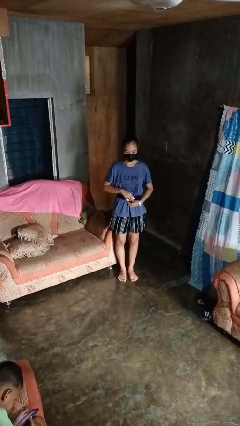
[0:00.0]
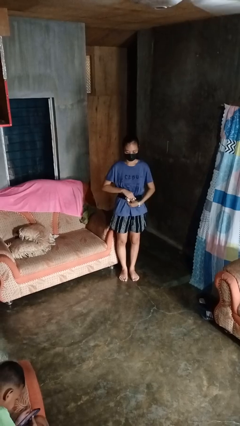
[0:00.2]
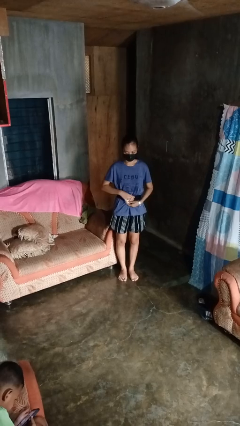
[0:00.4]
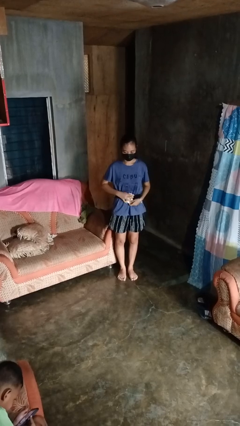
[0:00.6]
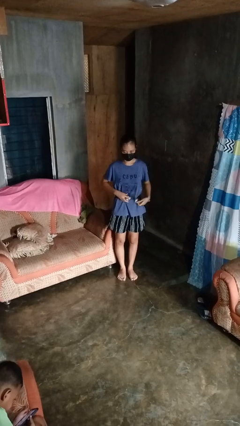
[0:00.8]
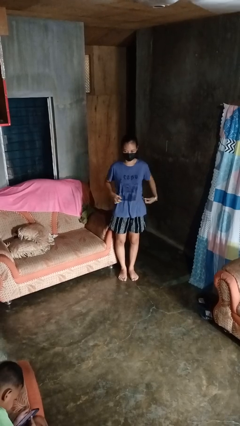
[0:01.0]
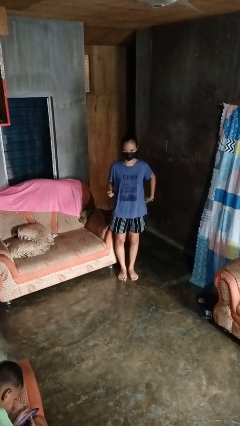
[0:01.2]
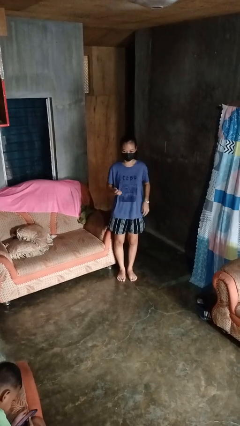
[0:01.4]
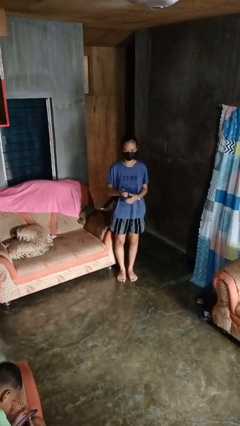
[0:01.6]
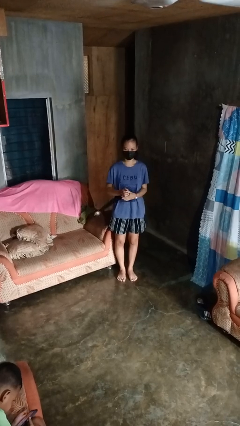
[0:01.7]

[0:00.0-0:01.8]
person takes off belt

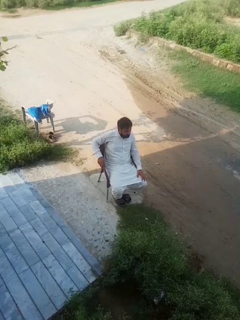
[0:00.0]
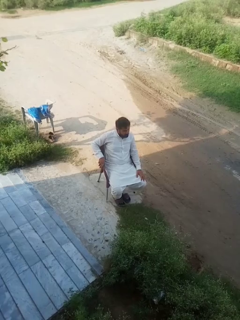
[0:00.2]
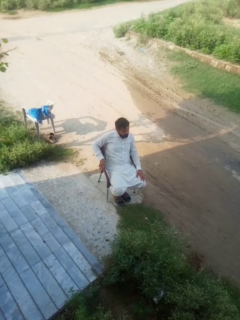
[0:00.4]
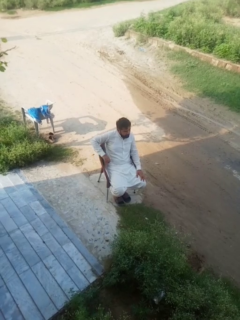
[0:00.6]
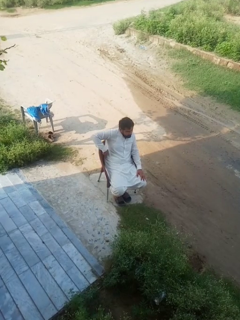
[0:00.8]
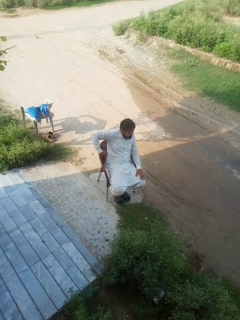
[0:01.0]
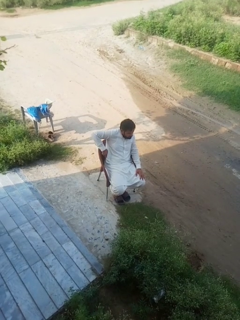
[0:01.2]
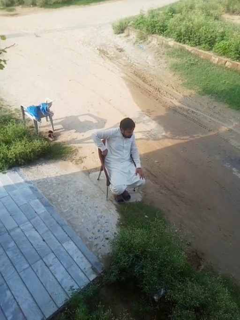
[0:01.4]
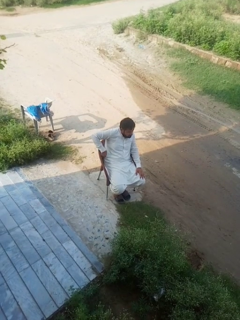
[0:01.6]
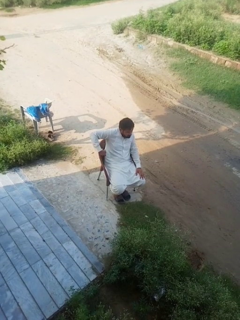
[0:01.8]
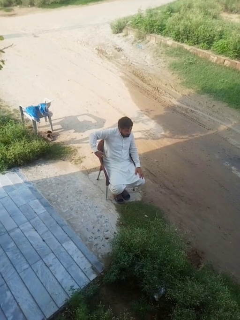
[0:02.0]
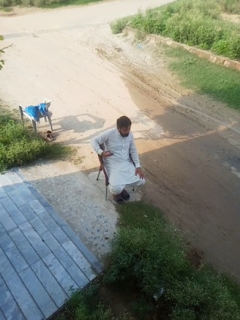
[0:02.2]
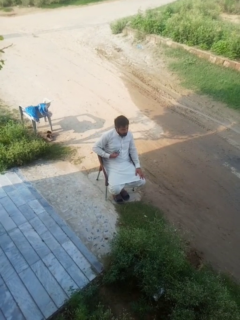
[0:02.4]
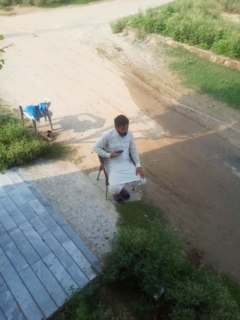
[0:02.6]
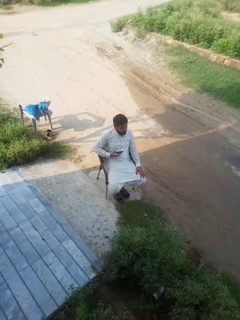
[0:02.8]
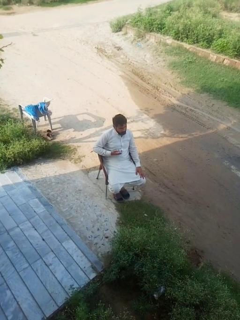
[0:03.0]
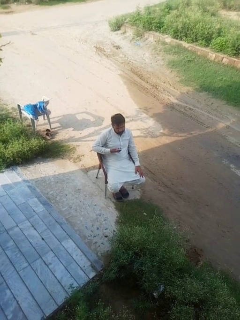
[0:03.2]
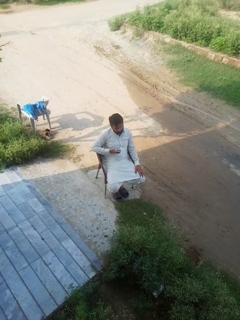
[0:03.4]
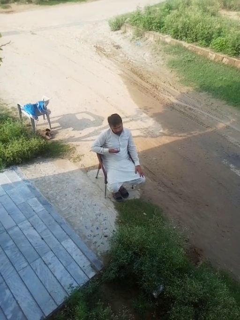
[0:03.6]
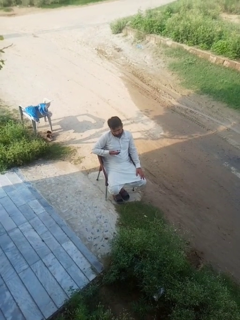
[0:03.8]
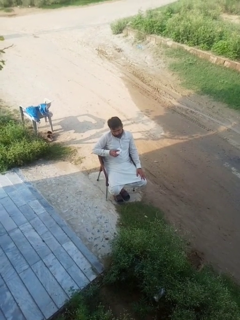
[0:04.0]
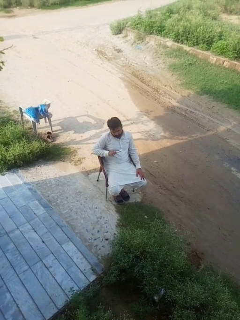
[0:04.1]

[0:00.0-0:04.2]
person takes phone from pocket

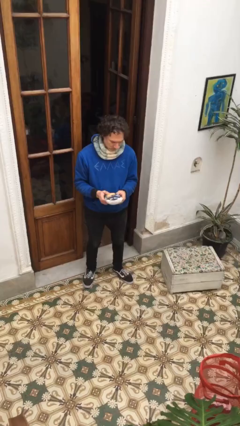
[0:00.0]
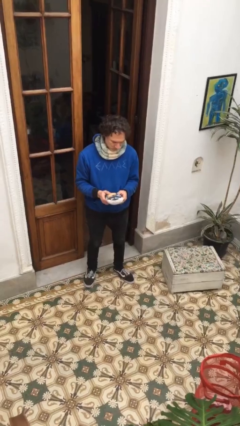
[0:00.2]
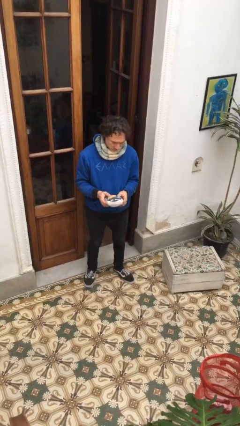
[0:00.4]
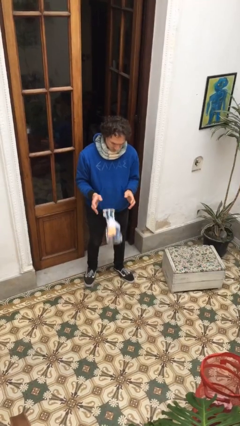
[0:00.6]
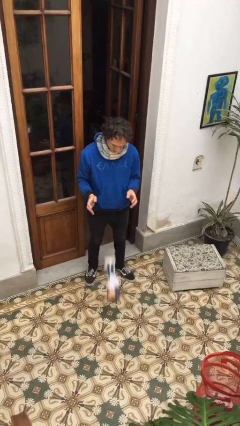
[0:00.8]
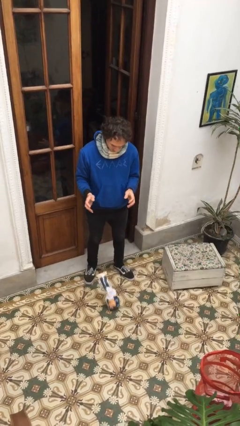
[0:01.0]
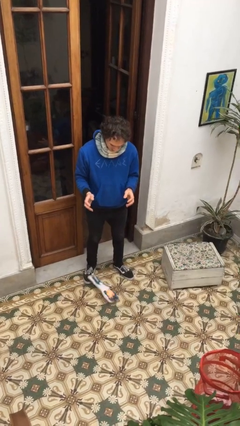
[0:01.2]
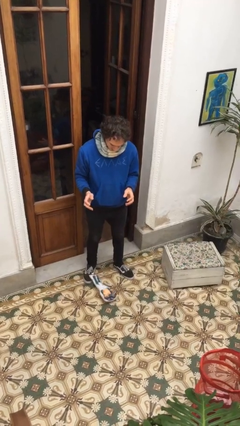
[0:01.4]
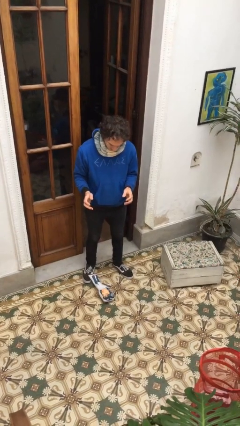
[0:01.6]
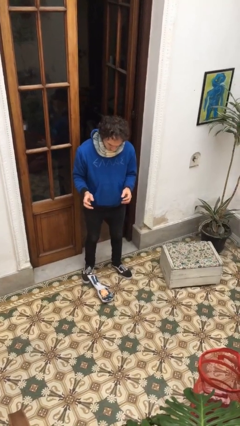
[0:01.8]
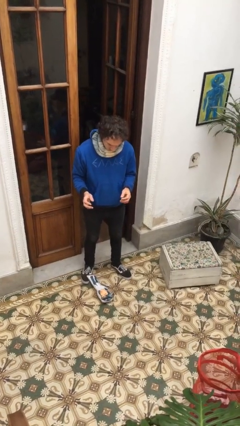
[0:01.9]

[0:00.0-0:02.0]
person drops object

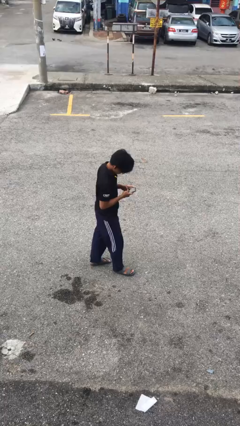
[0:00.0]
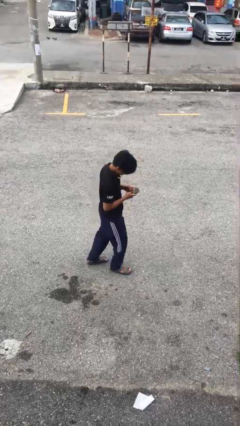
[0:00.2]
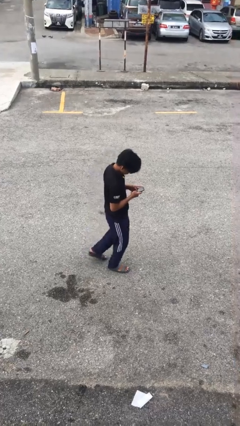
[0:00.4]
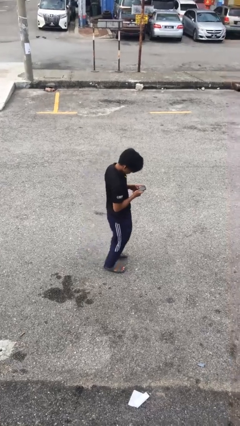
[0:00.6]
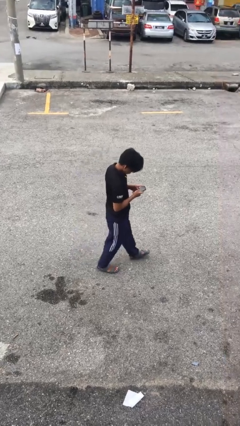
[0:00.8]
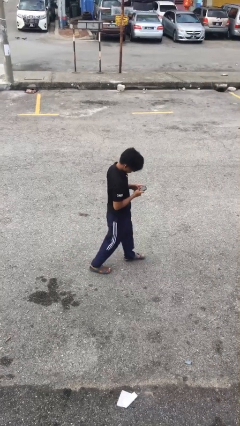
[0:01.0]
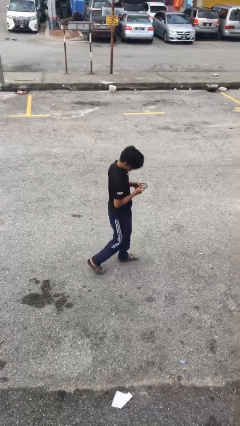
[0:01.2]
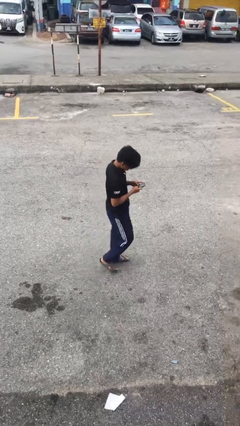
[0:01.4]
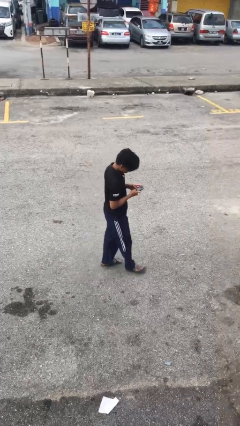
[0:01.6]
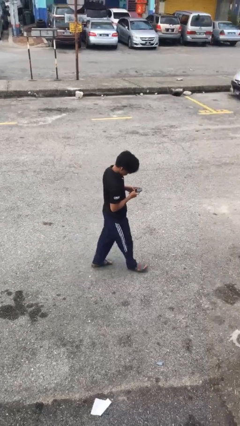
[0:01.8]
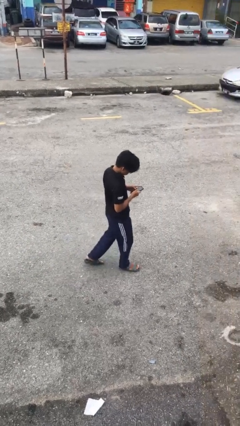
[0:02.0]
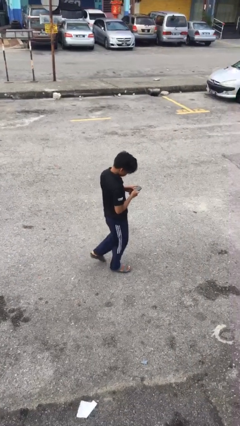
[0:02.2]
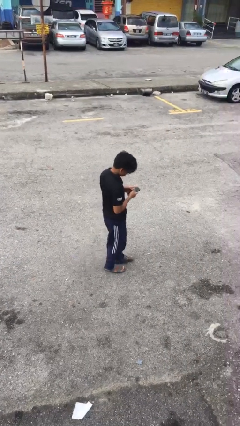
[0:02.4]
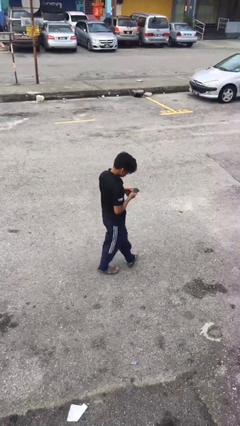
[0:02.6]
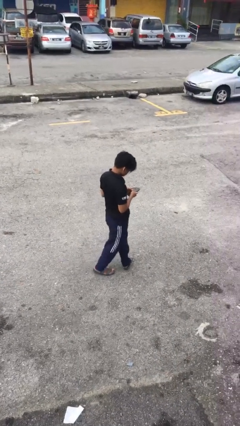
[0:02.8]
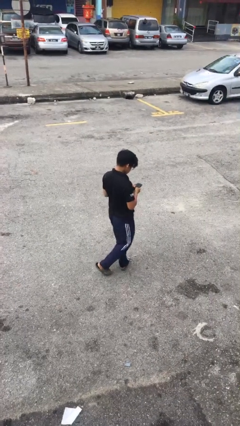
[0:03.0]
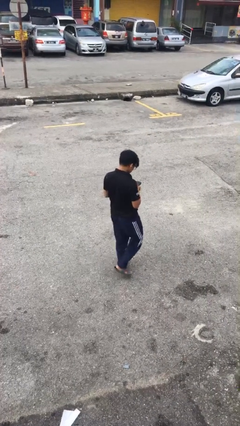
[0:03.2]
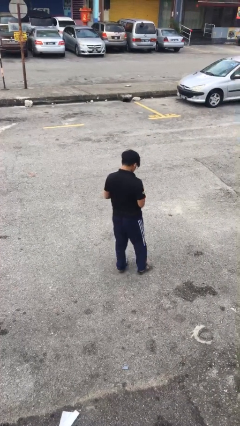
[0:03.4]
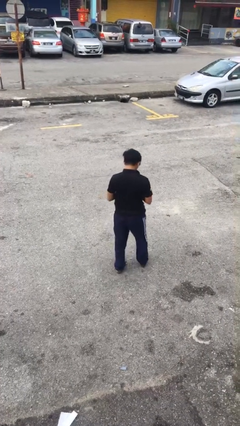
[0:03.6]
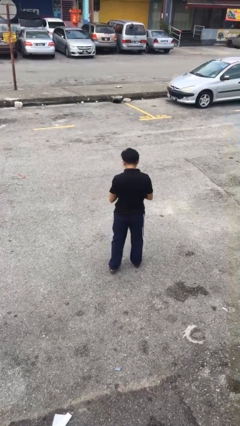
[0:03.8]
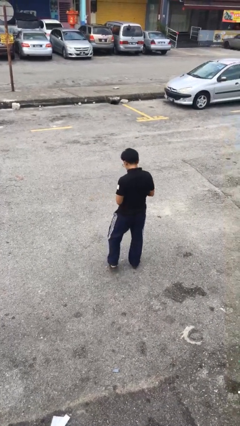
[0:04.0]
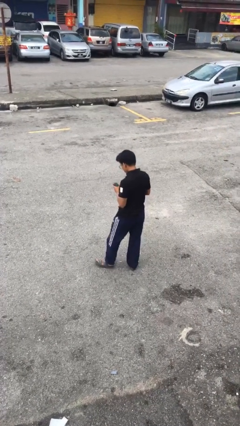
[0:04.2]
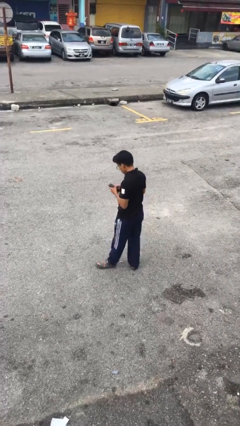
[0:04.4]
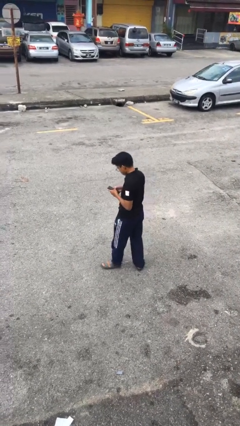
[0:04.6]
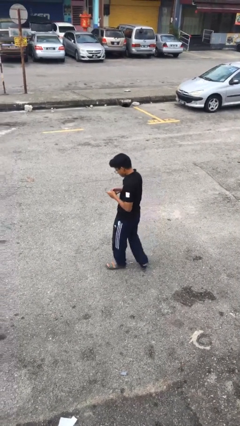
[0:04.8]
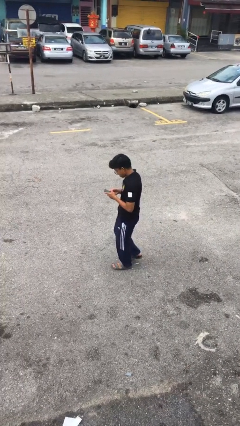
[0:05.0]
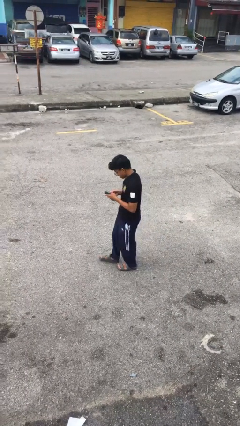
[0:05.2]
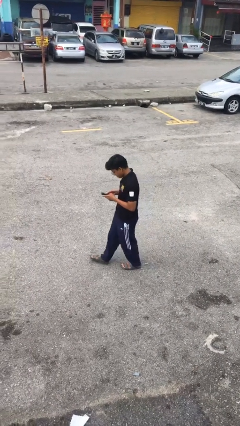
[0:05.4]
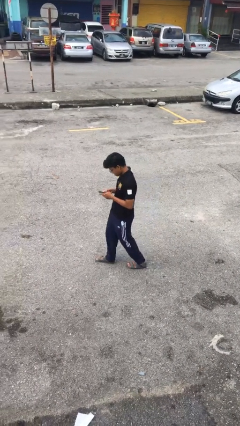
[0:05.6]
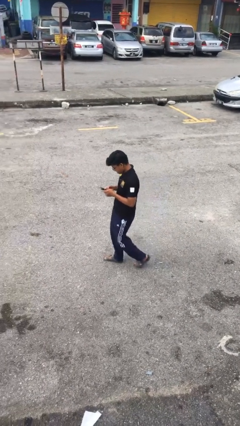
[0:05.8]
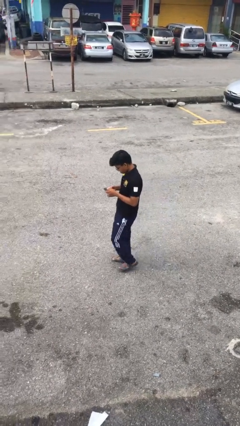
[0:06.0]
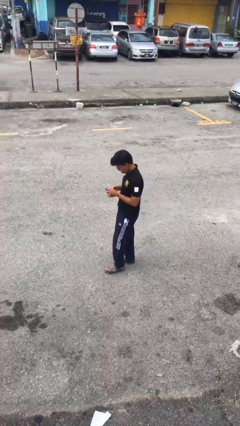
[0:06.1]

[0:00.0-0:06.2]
person texts on phone

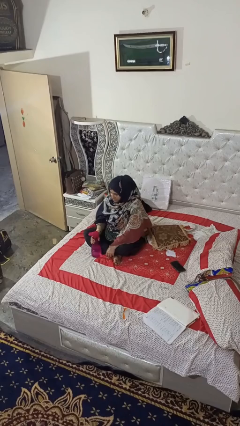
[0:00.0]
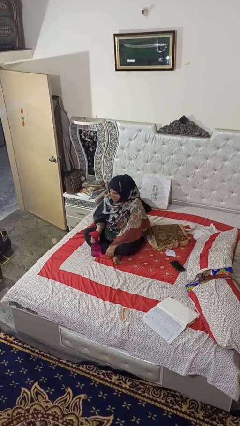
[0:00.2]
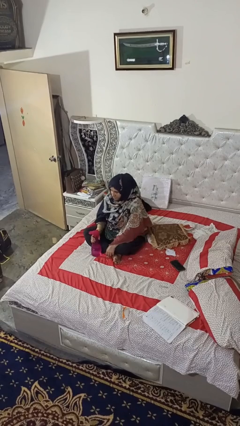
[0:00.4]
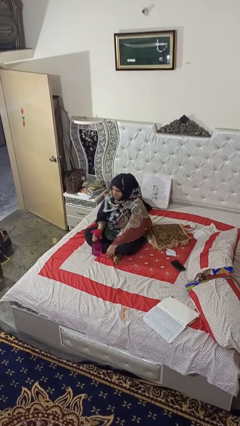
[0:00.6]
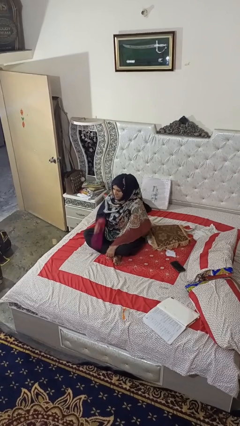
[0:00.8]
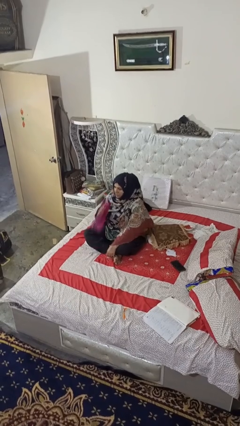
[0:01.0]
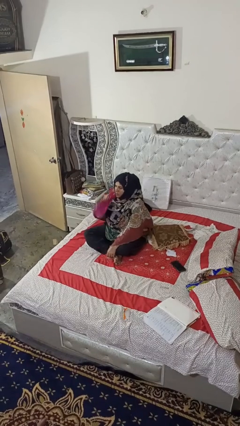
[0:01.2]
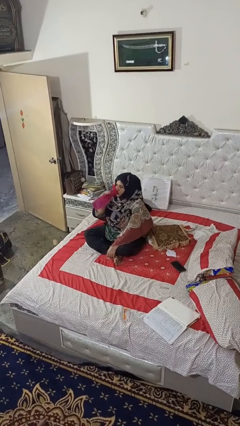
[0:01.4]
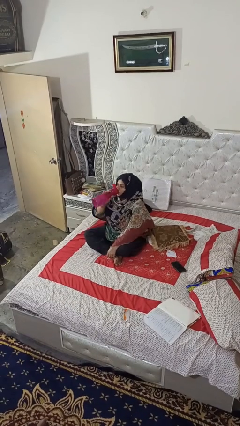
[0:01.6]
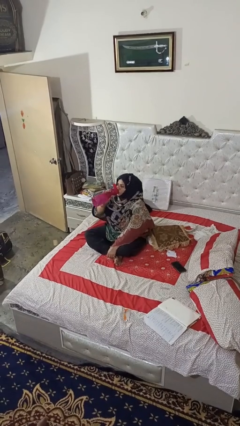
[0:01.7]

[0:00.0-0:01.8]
person drinks from bottle

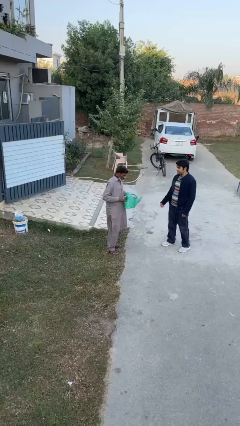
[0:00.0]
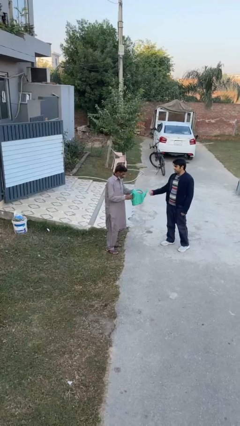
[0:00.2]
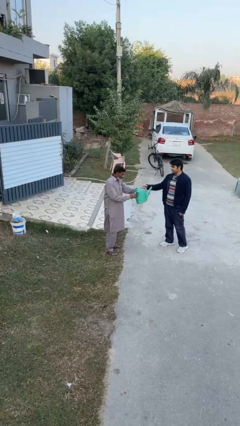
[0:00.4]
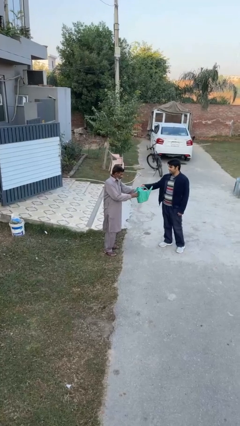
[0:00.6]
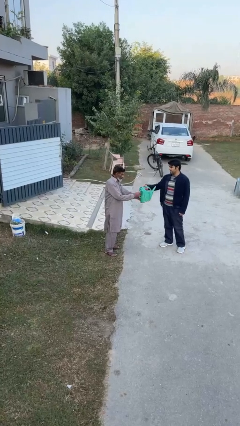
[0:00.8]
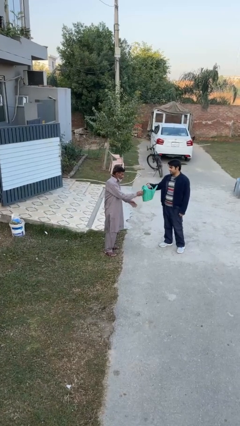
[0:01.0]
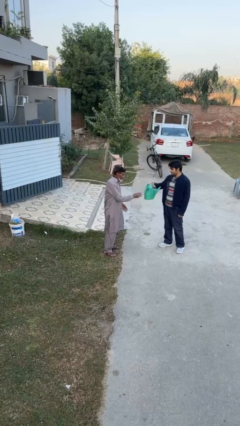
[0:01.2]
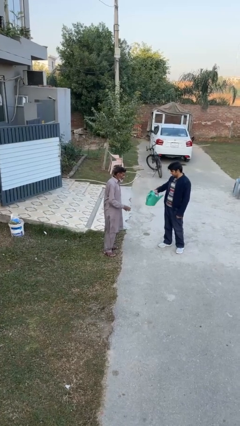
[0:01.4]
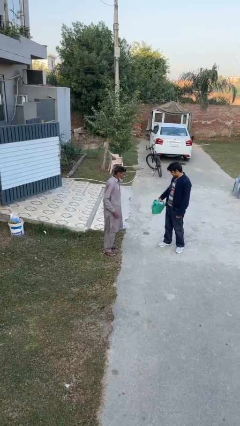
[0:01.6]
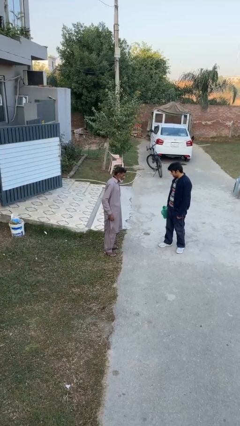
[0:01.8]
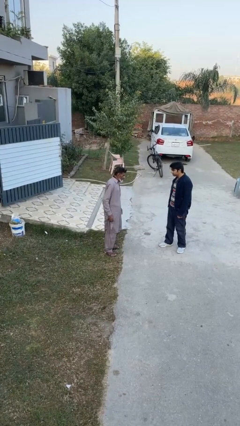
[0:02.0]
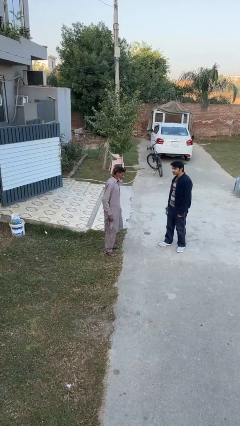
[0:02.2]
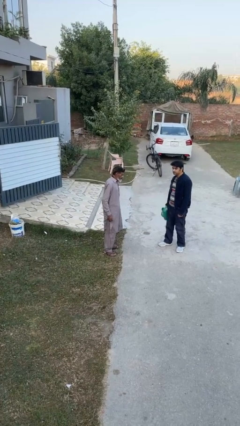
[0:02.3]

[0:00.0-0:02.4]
person transfers object to person
